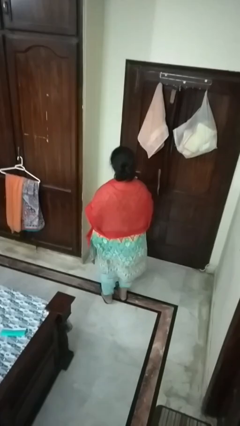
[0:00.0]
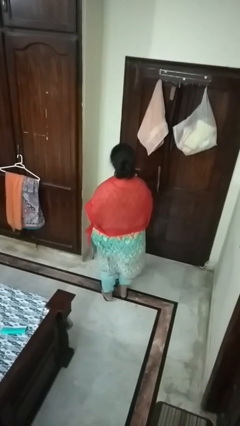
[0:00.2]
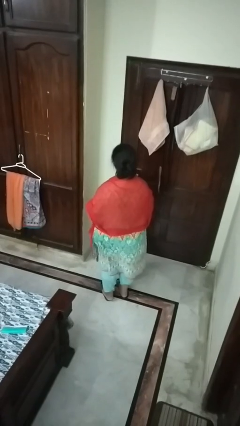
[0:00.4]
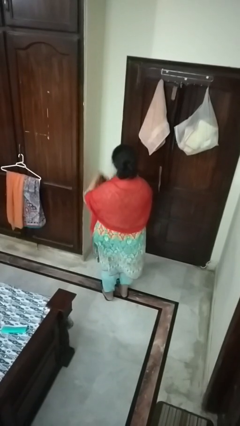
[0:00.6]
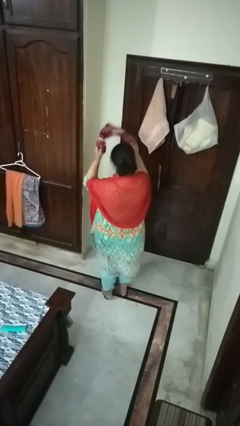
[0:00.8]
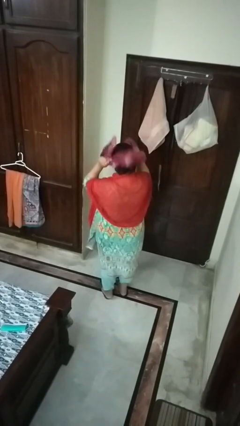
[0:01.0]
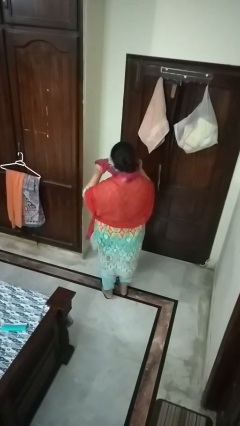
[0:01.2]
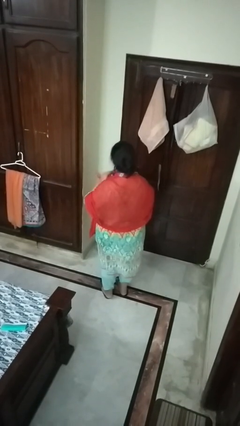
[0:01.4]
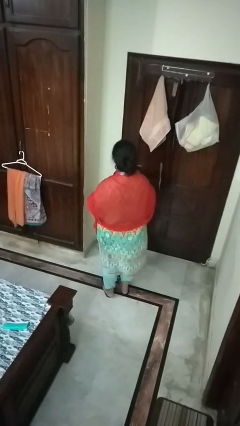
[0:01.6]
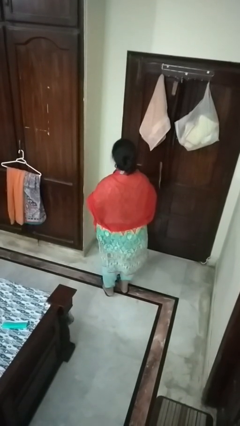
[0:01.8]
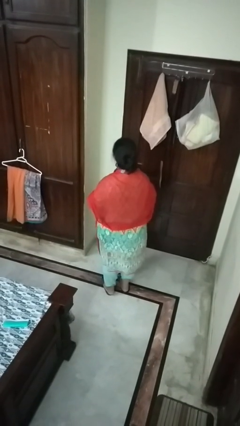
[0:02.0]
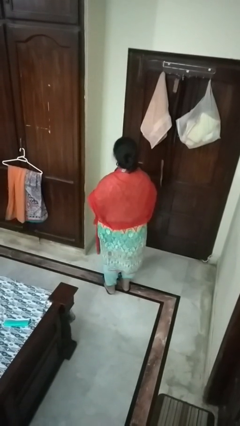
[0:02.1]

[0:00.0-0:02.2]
person puts on scarf

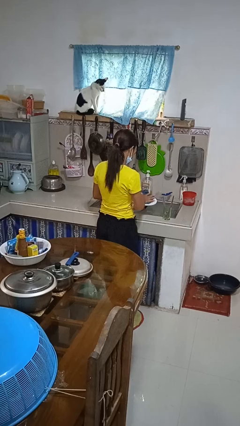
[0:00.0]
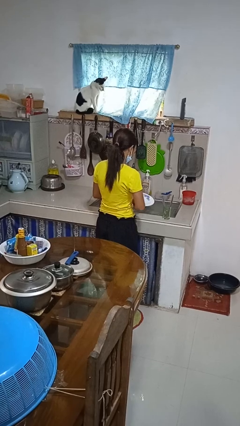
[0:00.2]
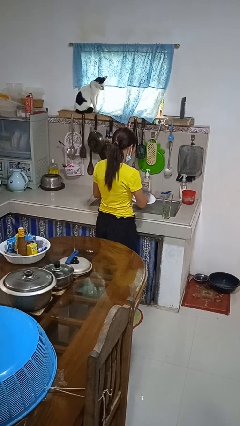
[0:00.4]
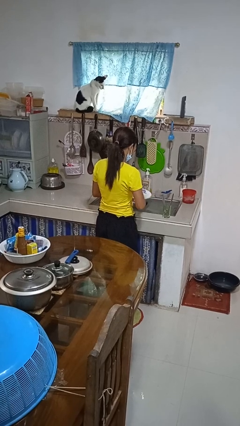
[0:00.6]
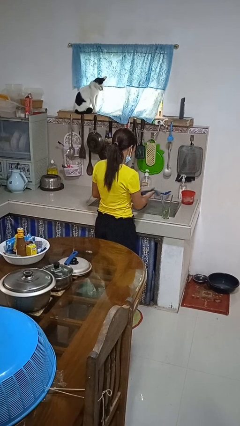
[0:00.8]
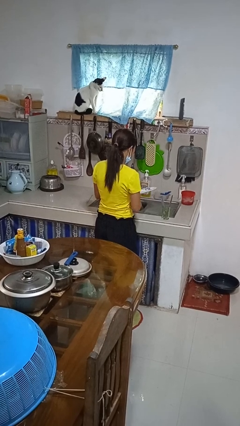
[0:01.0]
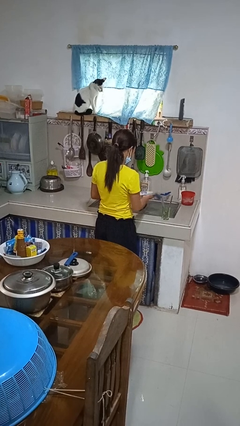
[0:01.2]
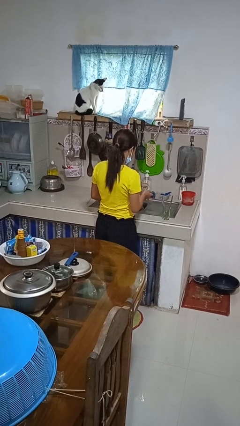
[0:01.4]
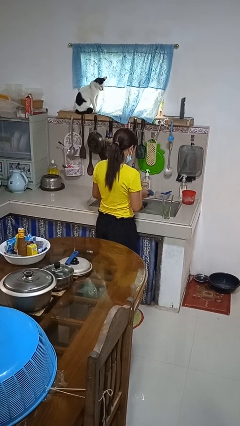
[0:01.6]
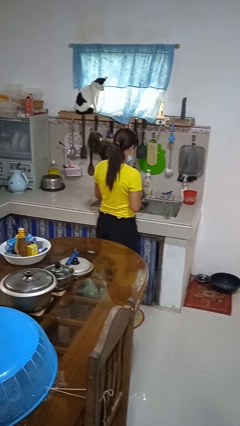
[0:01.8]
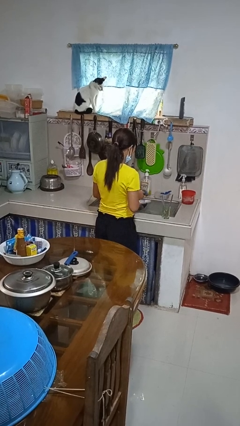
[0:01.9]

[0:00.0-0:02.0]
person dries dish

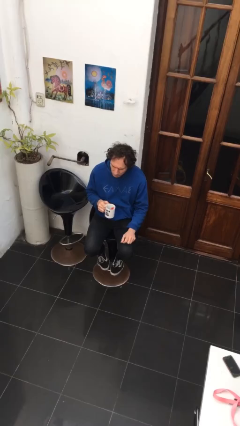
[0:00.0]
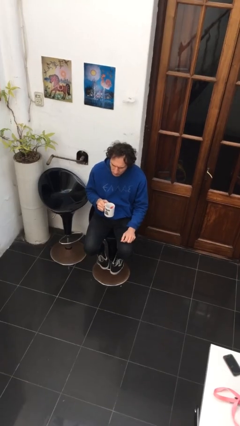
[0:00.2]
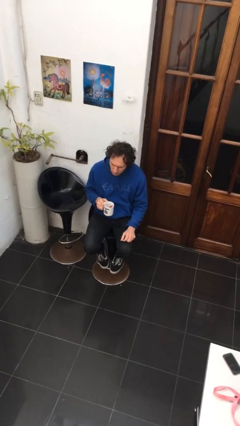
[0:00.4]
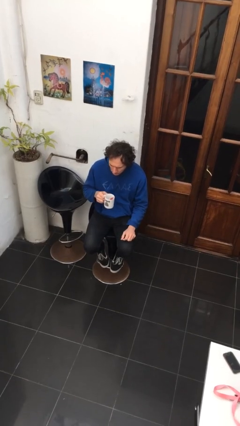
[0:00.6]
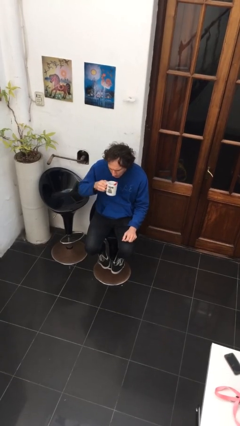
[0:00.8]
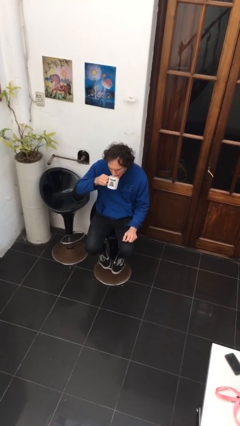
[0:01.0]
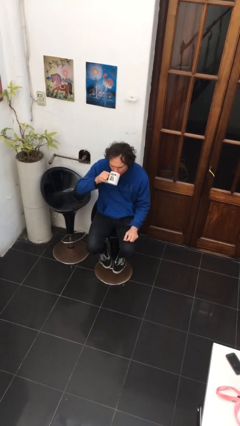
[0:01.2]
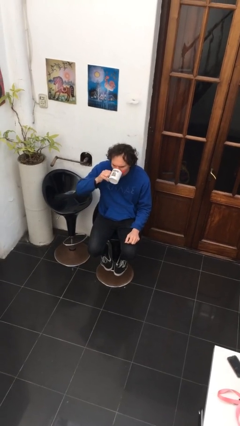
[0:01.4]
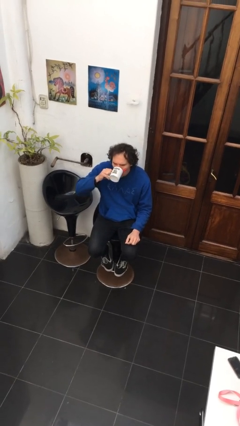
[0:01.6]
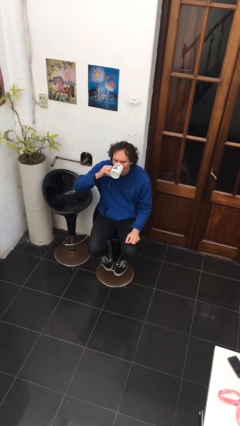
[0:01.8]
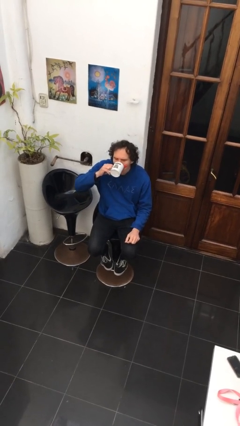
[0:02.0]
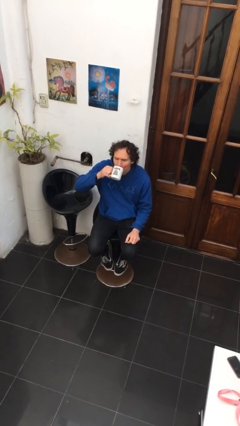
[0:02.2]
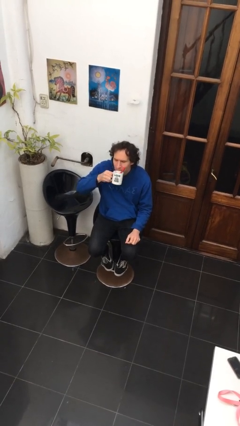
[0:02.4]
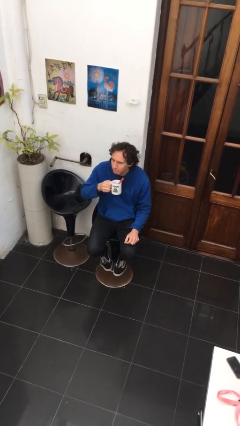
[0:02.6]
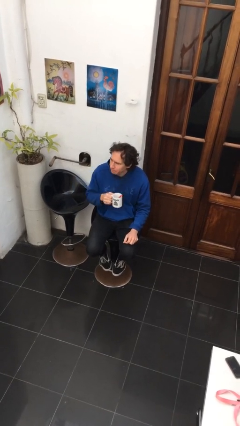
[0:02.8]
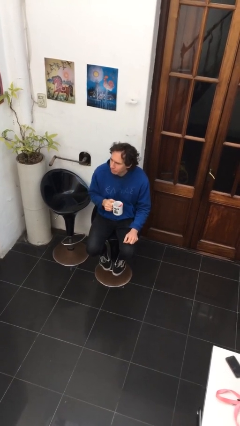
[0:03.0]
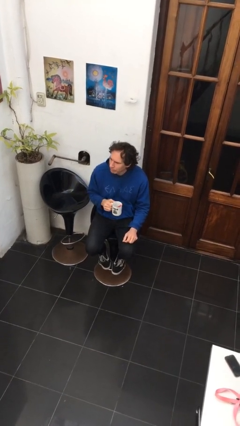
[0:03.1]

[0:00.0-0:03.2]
person drinks from mug

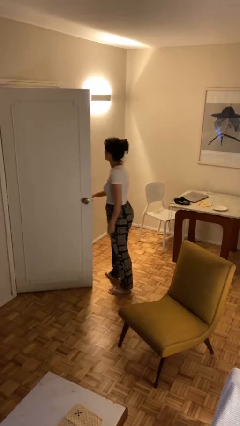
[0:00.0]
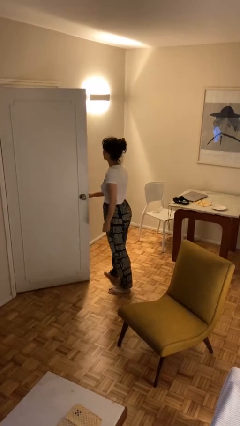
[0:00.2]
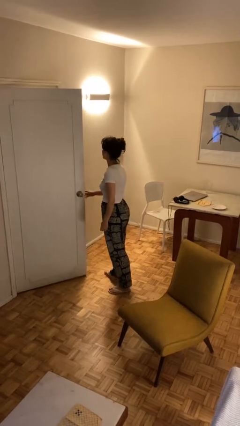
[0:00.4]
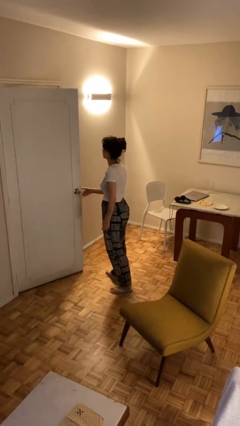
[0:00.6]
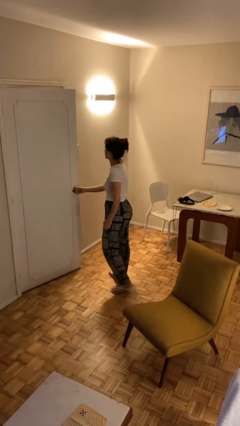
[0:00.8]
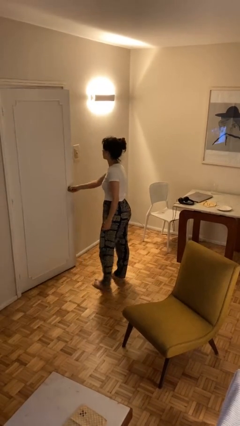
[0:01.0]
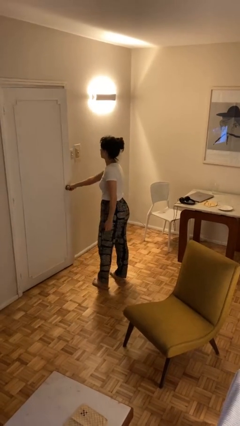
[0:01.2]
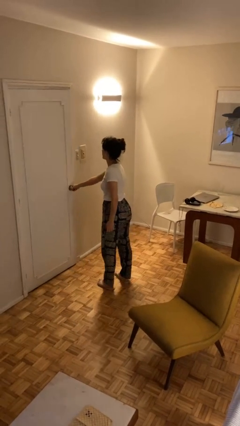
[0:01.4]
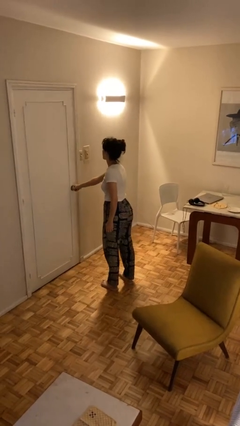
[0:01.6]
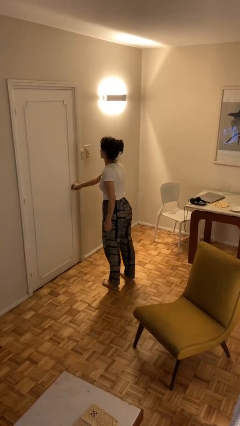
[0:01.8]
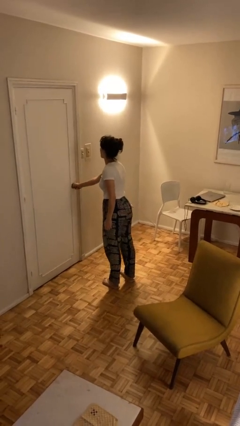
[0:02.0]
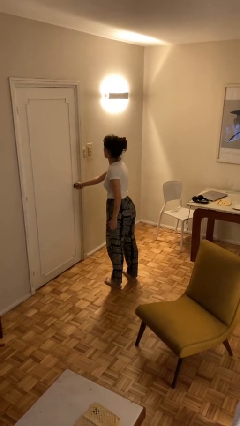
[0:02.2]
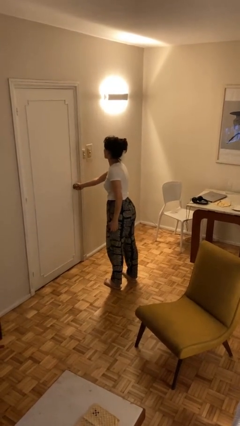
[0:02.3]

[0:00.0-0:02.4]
person closes facility door

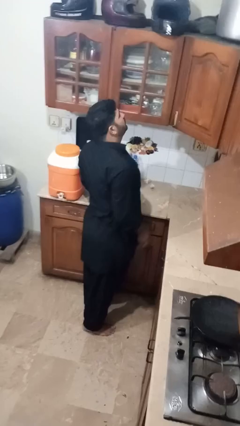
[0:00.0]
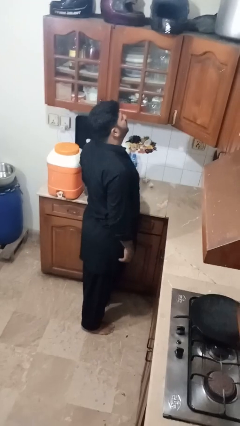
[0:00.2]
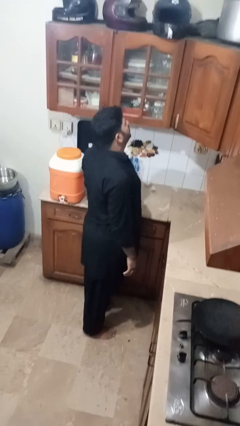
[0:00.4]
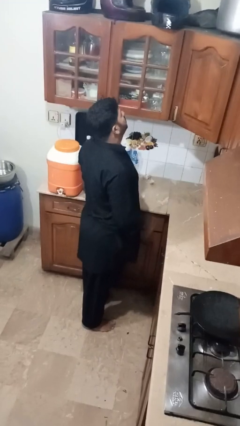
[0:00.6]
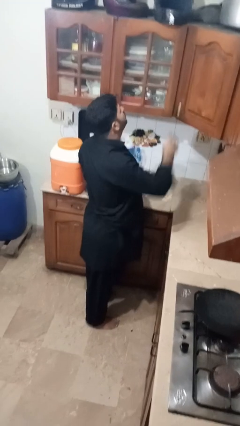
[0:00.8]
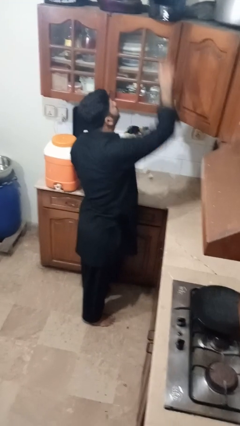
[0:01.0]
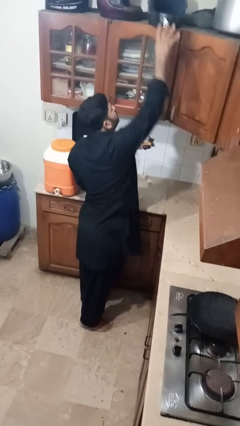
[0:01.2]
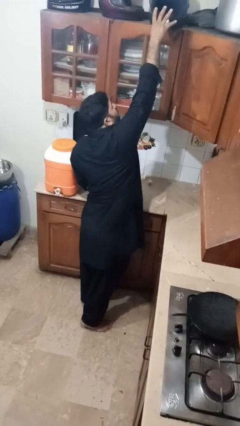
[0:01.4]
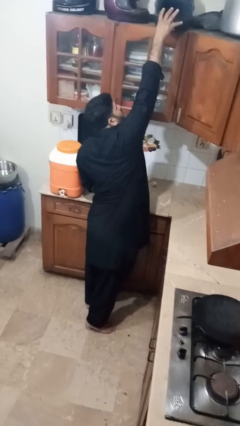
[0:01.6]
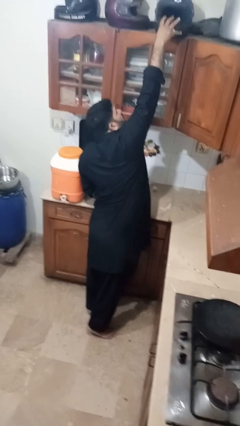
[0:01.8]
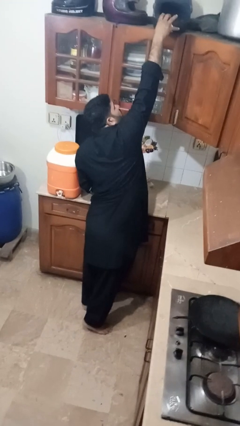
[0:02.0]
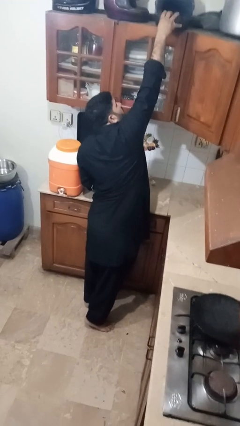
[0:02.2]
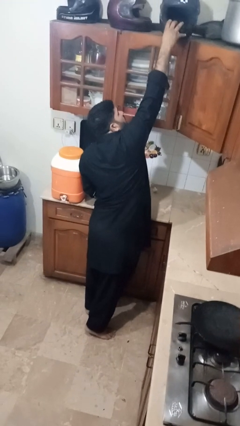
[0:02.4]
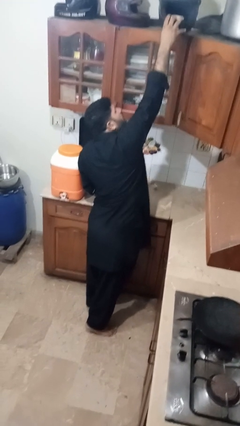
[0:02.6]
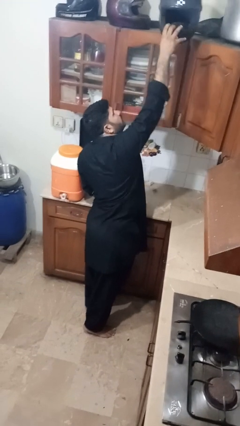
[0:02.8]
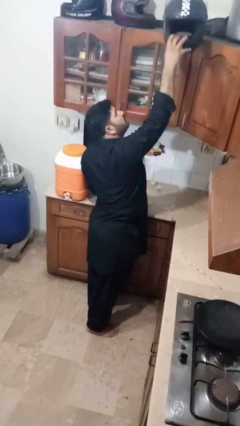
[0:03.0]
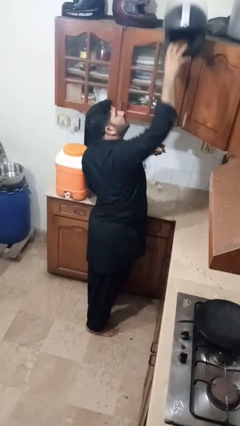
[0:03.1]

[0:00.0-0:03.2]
person picks up object from shelf

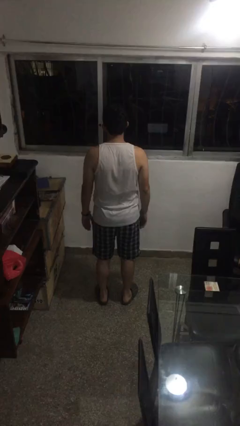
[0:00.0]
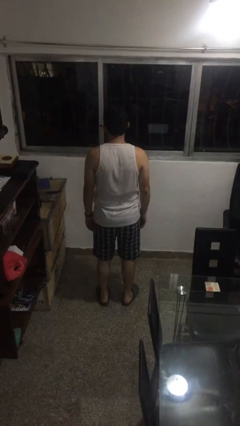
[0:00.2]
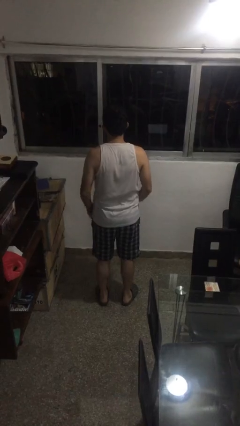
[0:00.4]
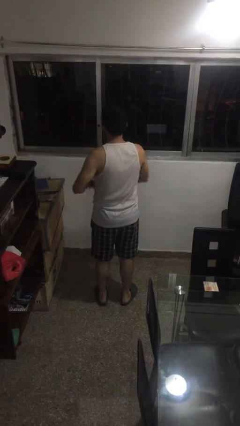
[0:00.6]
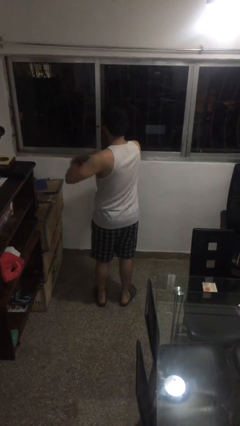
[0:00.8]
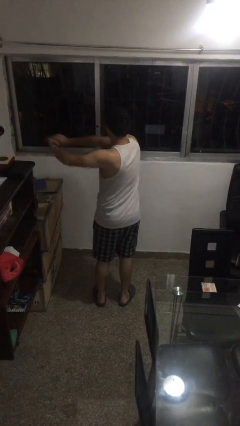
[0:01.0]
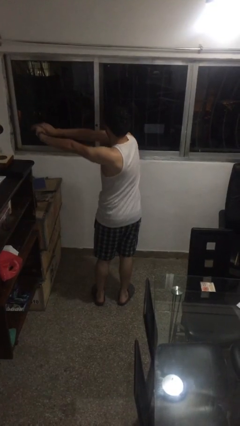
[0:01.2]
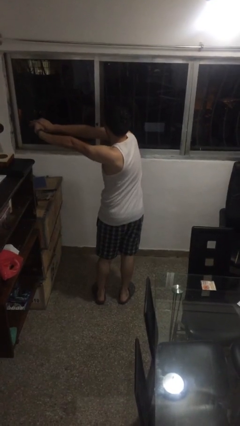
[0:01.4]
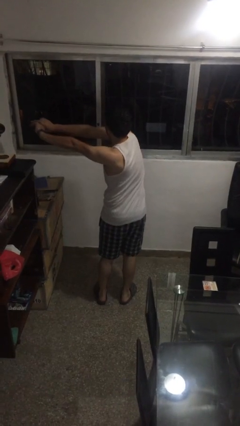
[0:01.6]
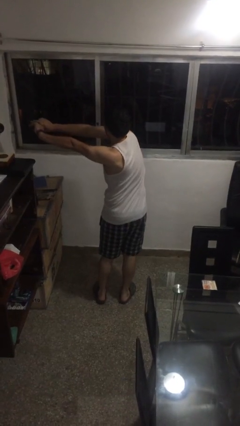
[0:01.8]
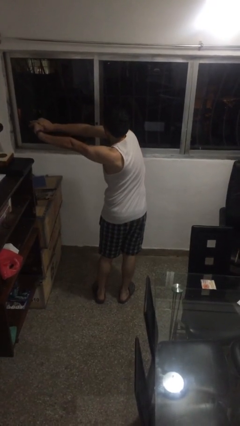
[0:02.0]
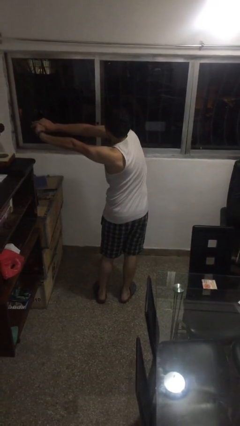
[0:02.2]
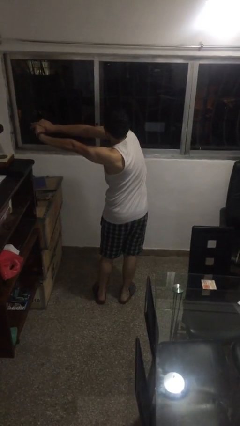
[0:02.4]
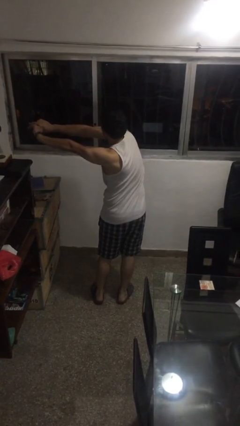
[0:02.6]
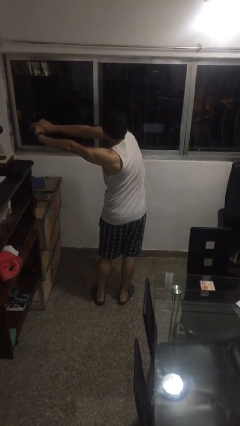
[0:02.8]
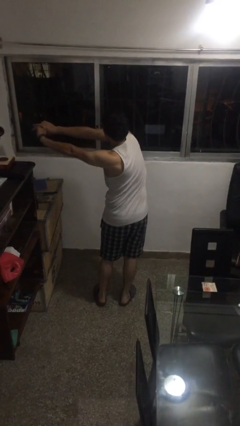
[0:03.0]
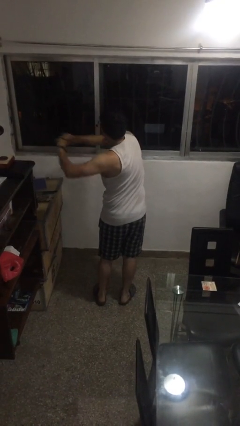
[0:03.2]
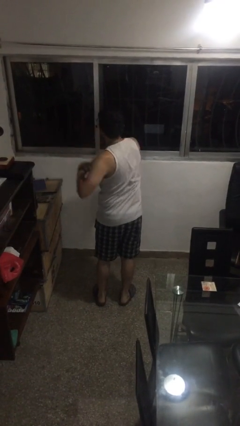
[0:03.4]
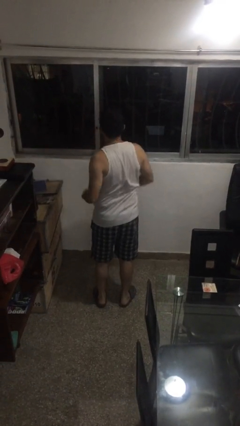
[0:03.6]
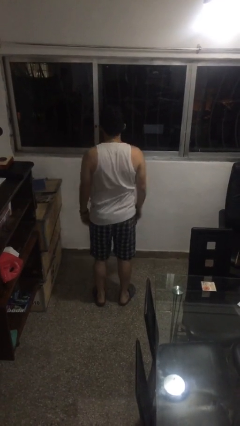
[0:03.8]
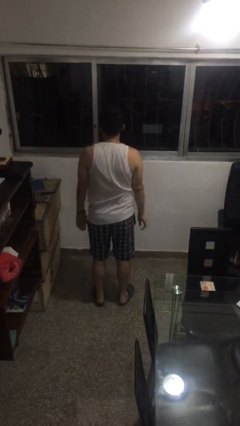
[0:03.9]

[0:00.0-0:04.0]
person stretches arms to side

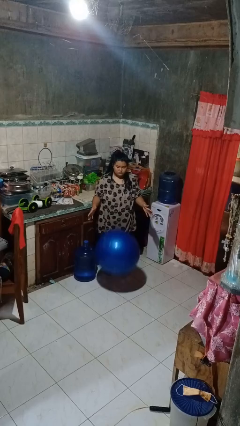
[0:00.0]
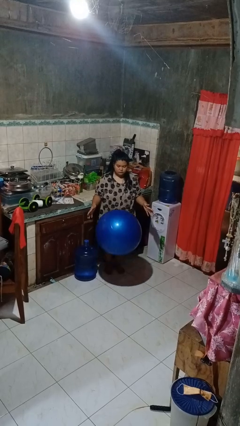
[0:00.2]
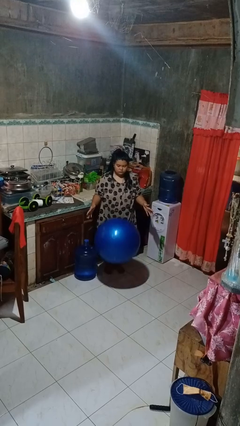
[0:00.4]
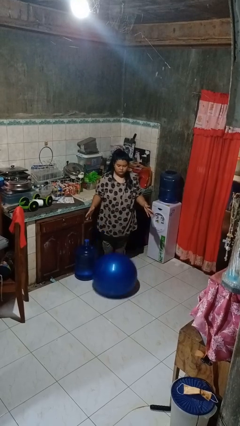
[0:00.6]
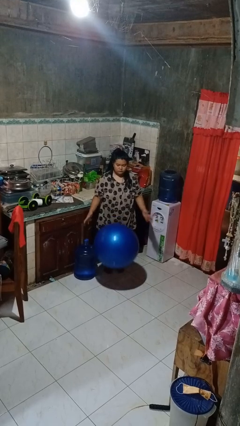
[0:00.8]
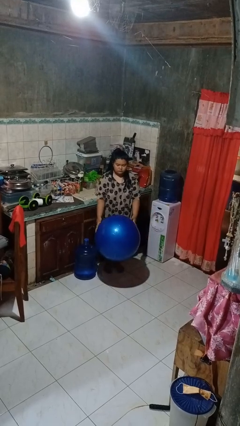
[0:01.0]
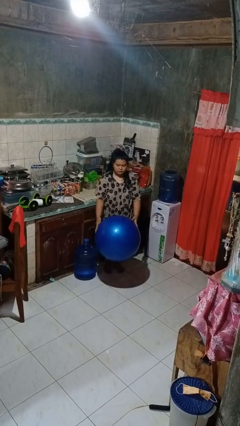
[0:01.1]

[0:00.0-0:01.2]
person bounces ball on floor
